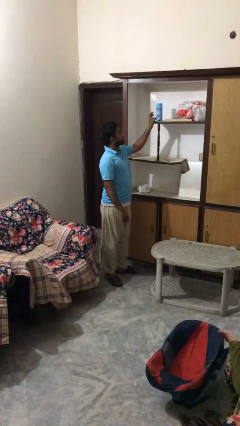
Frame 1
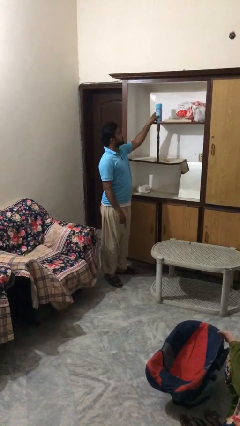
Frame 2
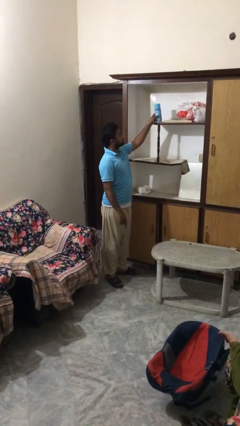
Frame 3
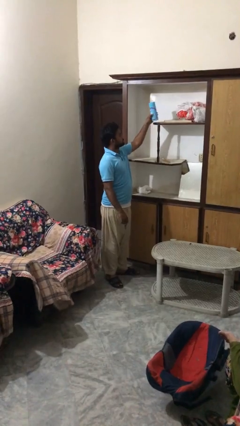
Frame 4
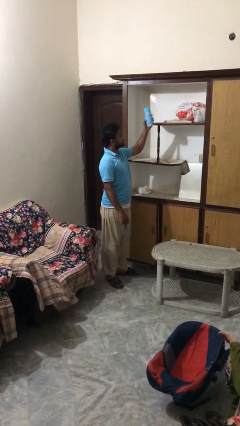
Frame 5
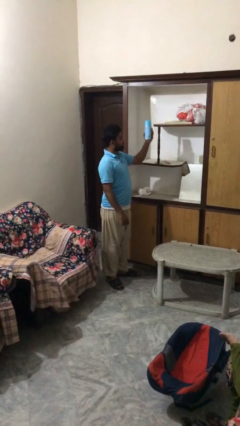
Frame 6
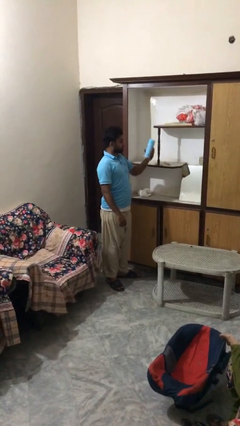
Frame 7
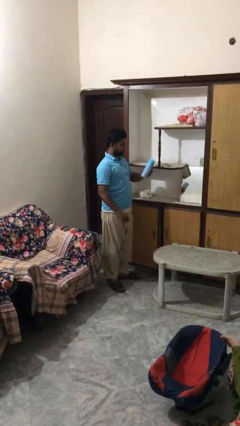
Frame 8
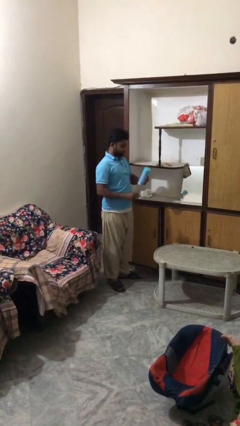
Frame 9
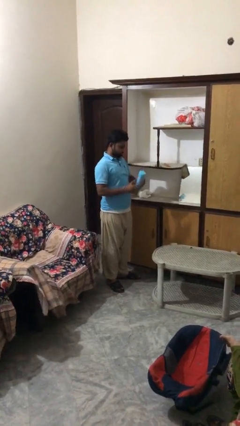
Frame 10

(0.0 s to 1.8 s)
person picks up object from shelf

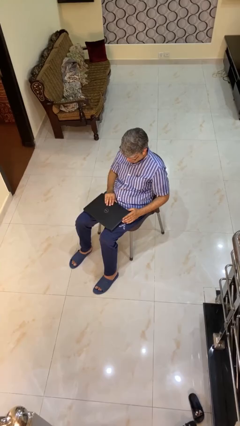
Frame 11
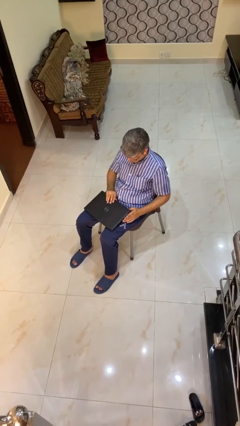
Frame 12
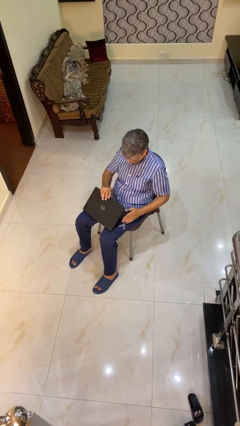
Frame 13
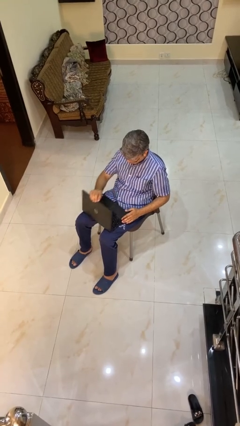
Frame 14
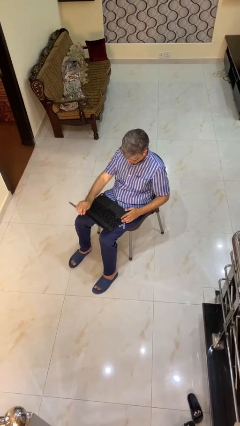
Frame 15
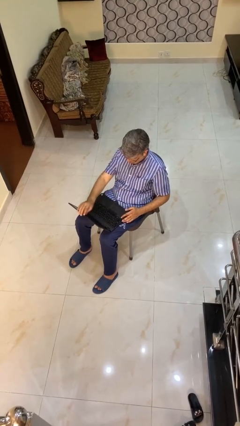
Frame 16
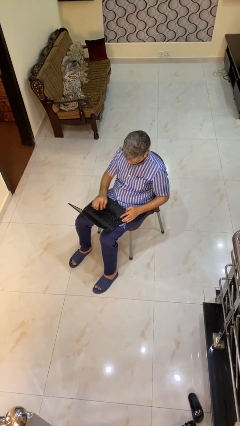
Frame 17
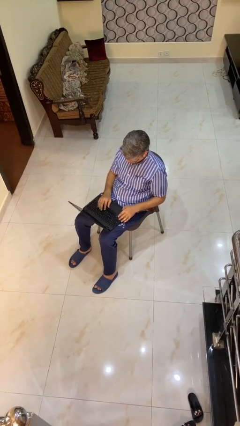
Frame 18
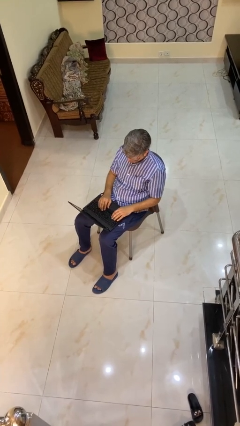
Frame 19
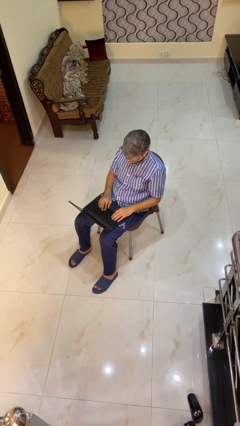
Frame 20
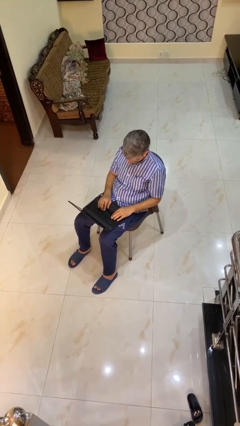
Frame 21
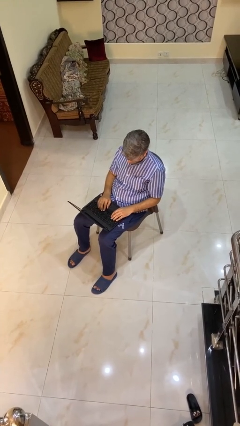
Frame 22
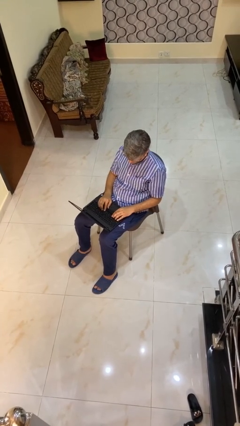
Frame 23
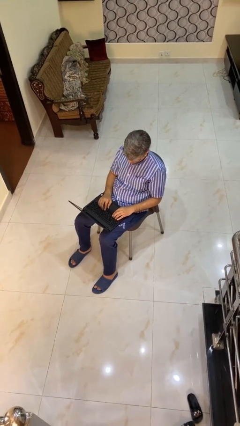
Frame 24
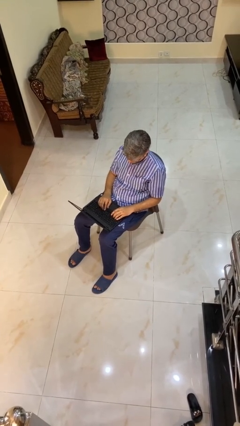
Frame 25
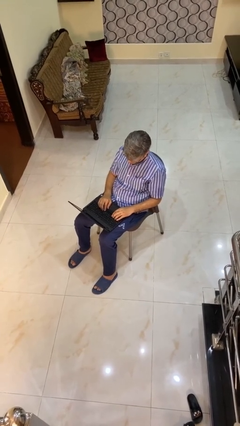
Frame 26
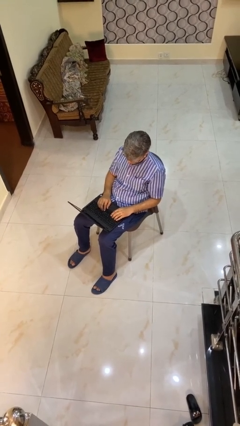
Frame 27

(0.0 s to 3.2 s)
person opens laptop

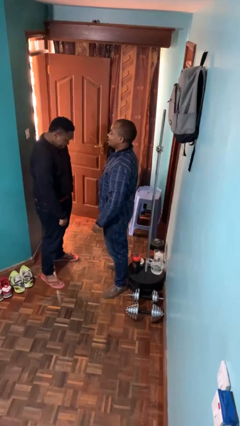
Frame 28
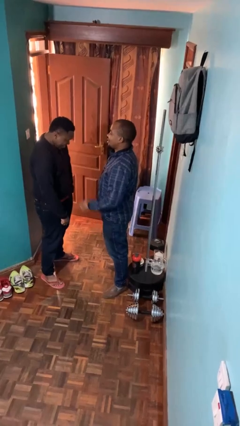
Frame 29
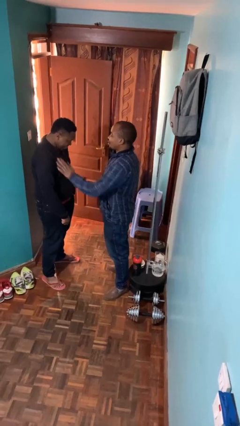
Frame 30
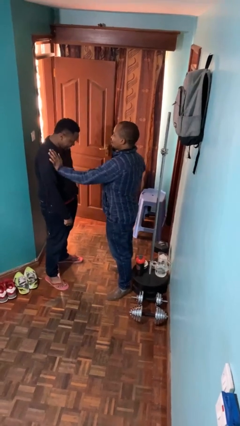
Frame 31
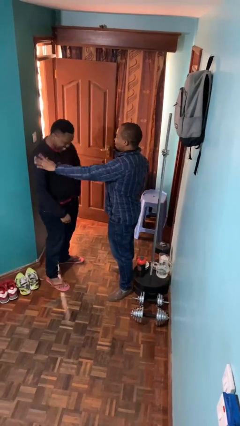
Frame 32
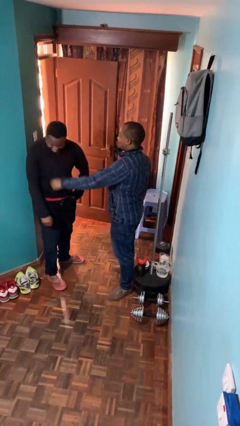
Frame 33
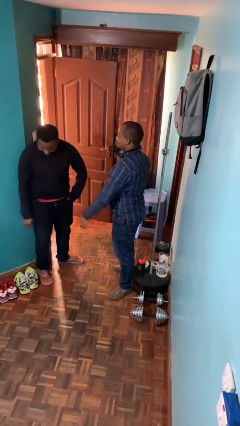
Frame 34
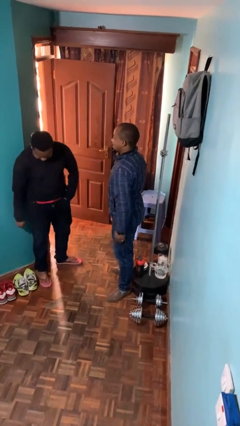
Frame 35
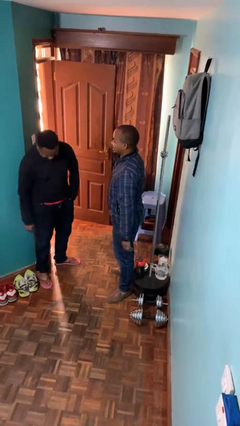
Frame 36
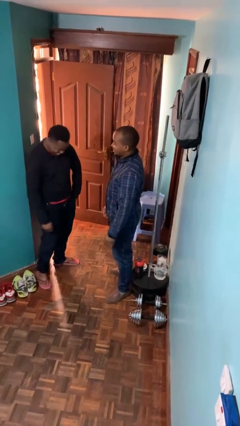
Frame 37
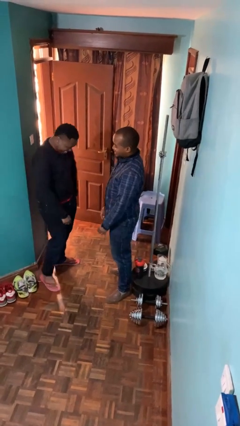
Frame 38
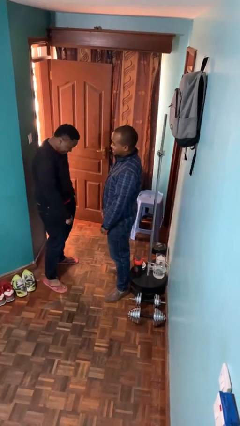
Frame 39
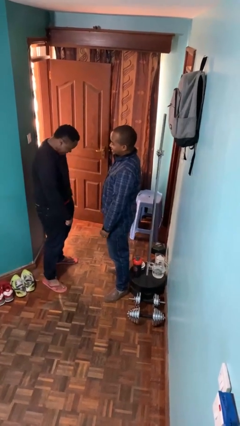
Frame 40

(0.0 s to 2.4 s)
person shoves person

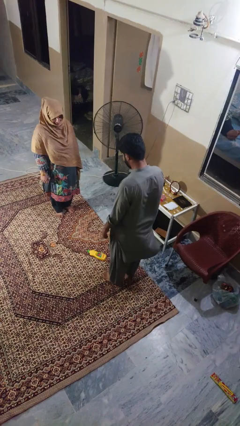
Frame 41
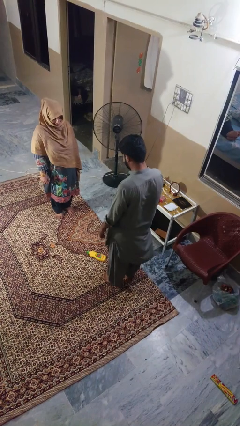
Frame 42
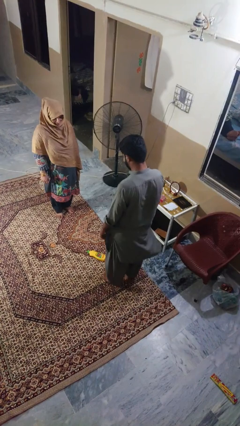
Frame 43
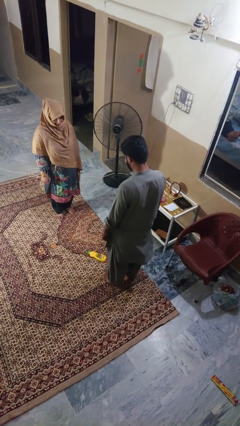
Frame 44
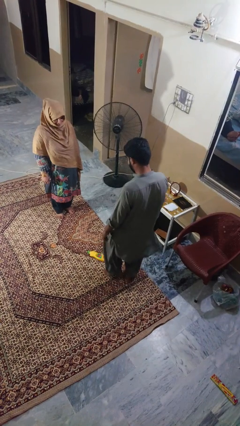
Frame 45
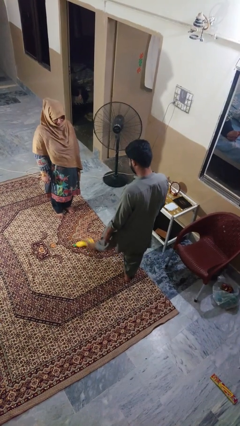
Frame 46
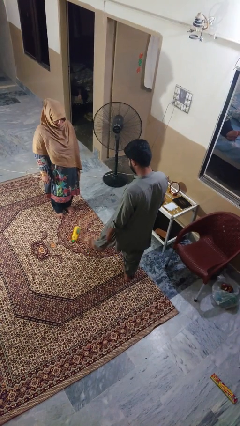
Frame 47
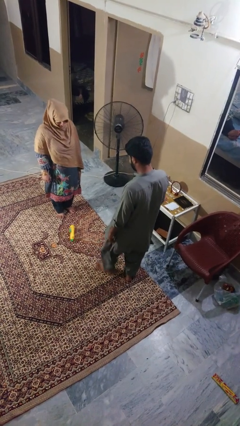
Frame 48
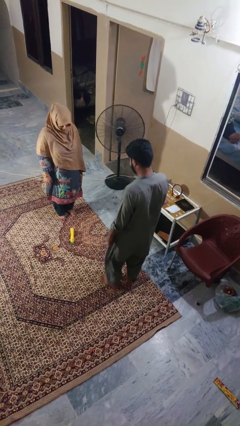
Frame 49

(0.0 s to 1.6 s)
person kicks object to person

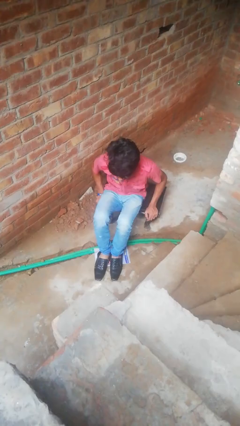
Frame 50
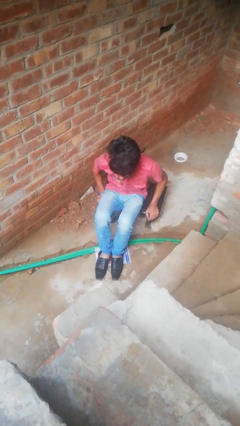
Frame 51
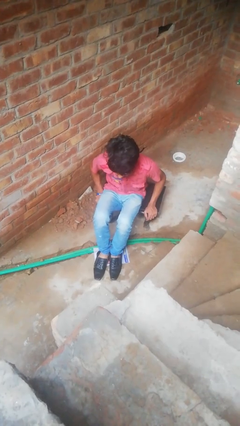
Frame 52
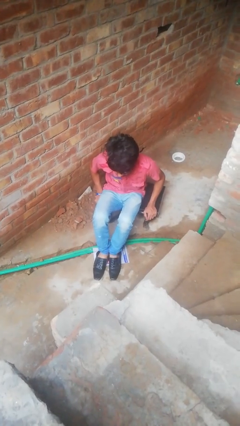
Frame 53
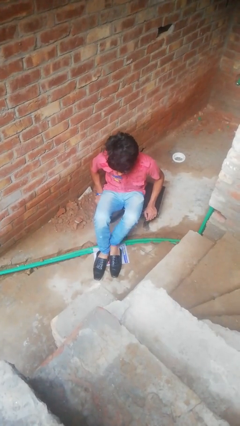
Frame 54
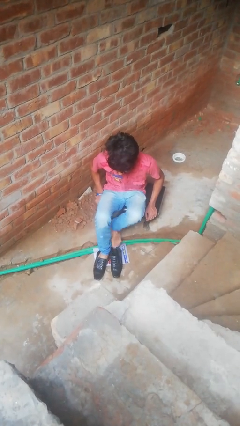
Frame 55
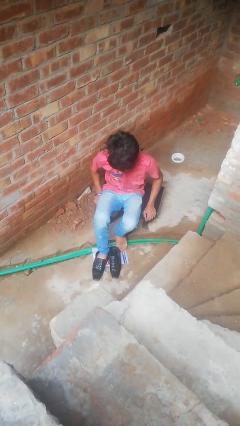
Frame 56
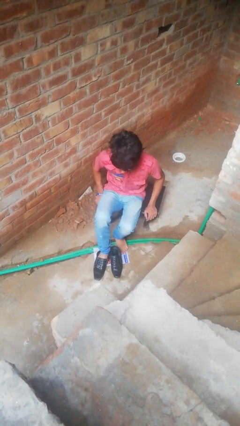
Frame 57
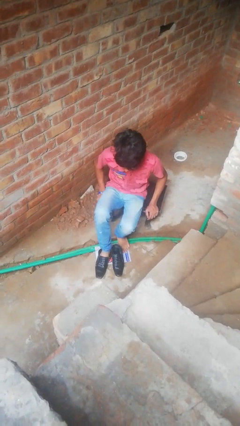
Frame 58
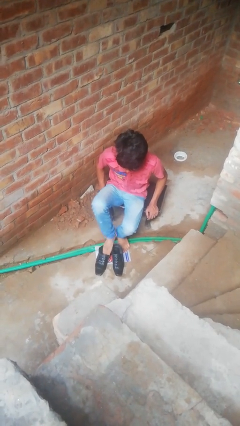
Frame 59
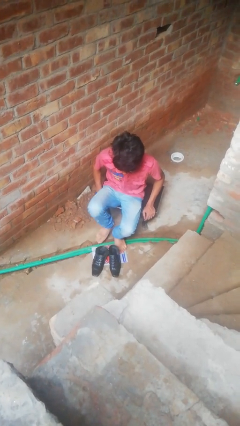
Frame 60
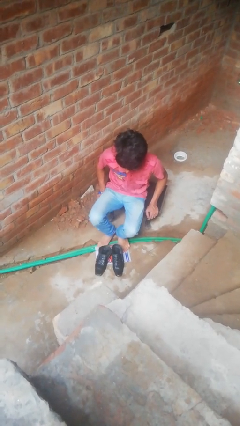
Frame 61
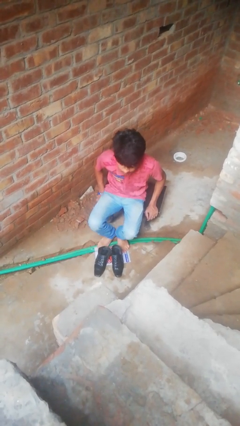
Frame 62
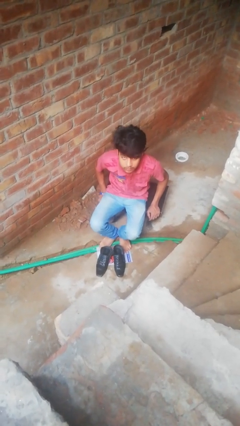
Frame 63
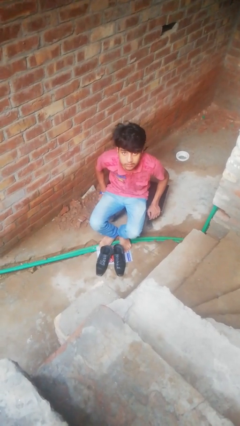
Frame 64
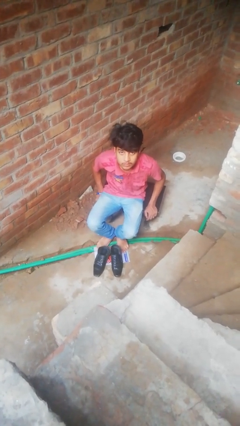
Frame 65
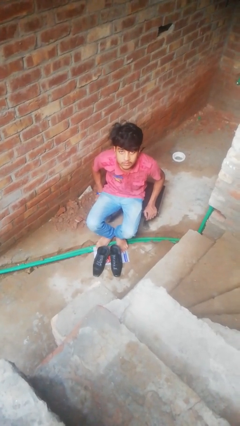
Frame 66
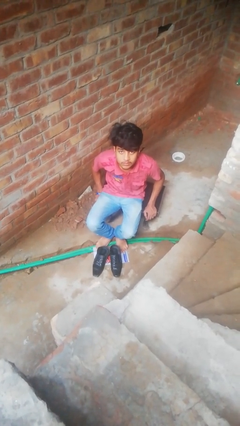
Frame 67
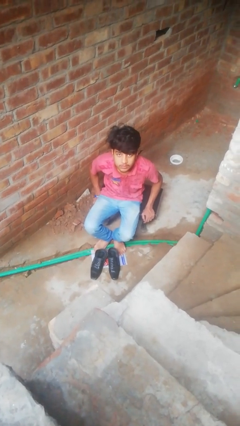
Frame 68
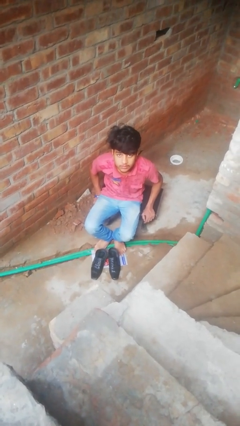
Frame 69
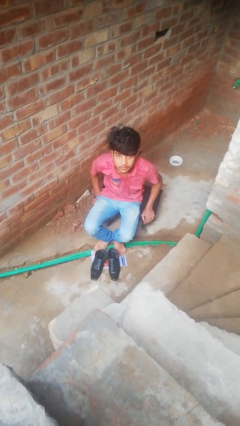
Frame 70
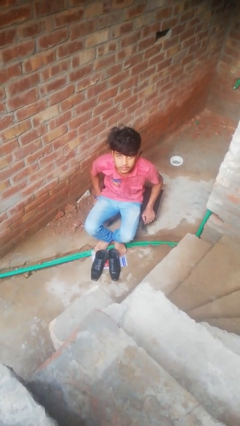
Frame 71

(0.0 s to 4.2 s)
person takes off shoes

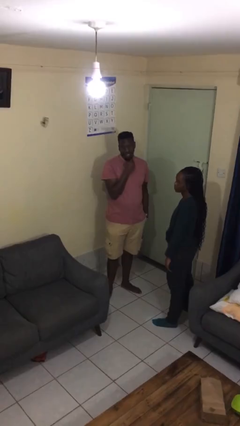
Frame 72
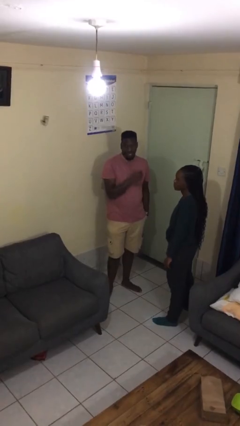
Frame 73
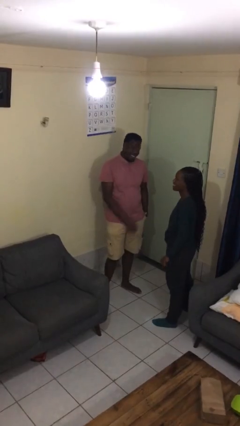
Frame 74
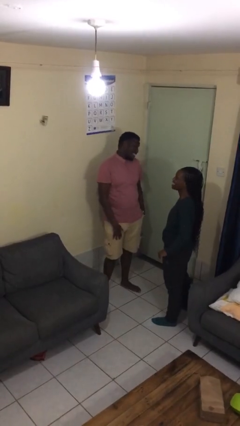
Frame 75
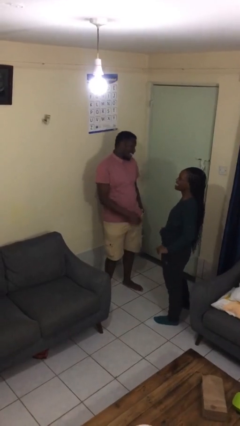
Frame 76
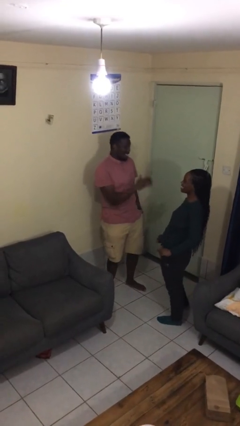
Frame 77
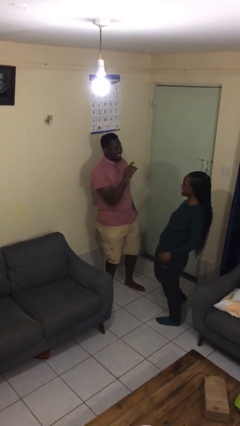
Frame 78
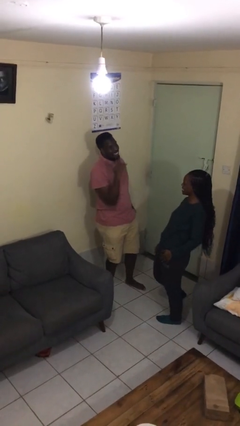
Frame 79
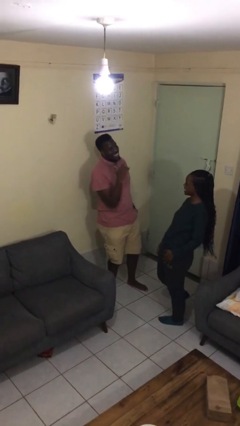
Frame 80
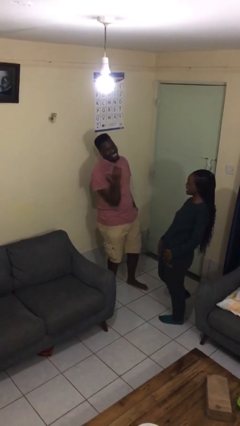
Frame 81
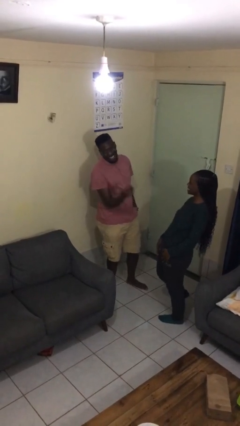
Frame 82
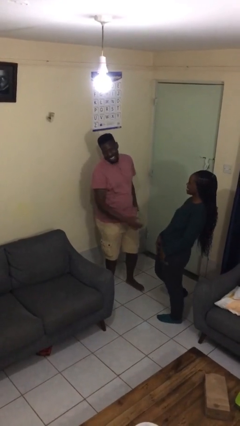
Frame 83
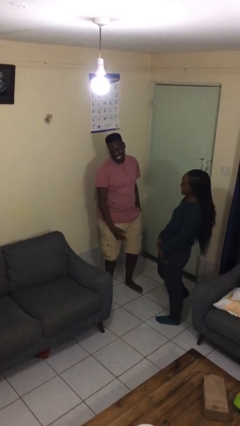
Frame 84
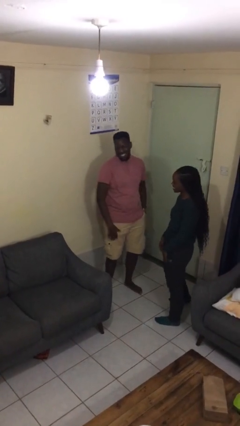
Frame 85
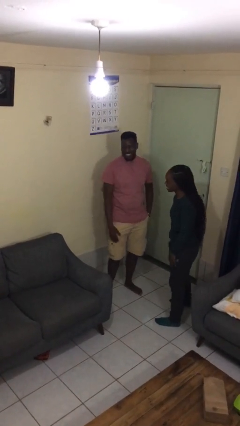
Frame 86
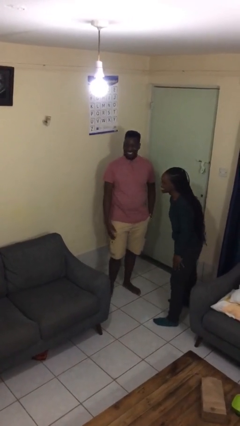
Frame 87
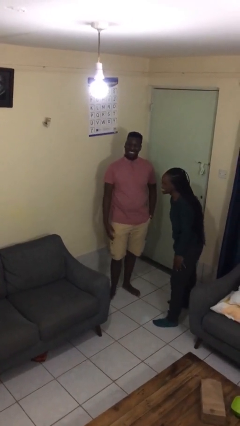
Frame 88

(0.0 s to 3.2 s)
person laughs with person

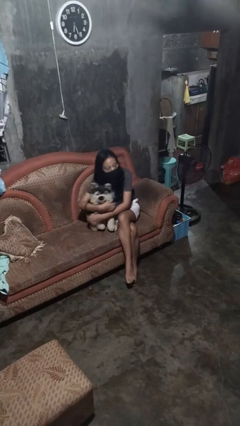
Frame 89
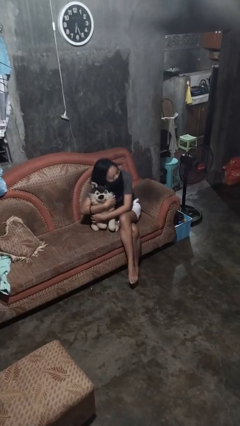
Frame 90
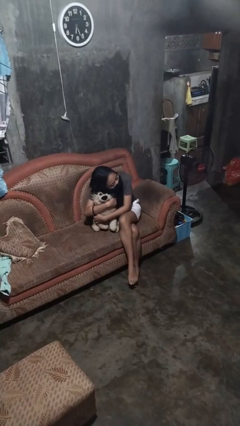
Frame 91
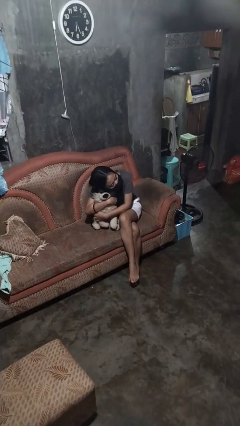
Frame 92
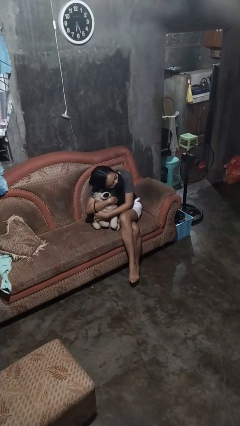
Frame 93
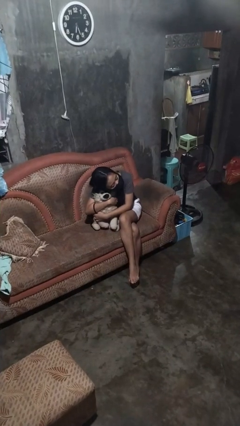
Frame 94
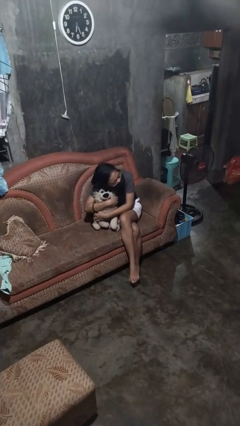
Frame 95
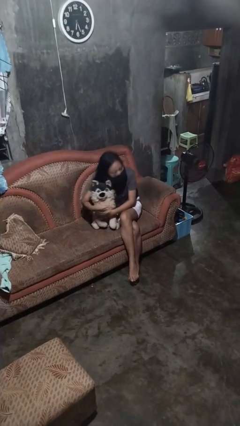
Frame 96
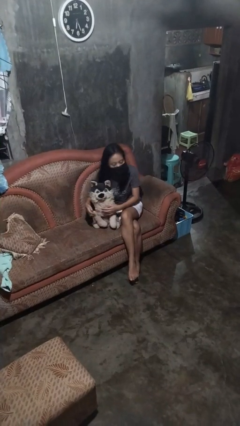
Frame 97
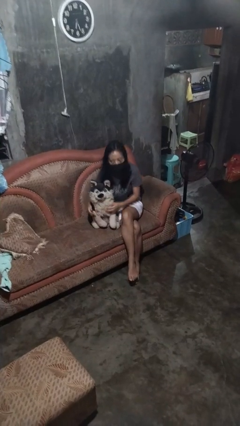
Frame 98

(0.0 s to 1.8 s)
person hugs stuffed animal
